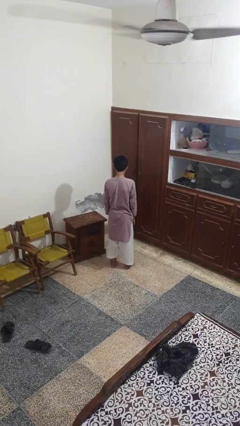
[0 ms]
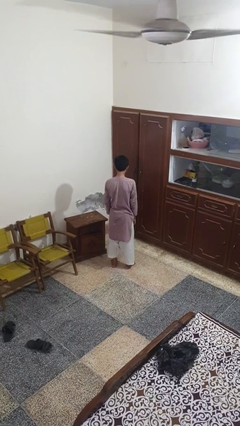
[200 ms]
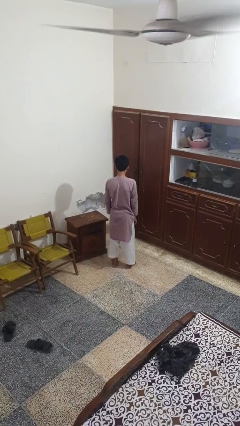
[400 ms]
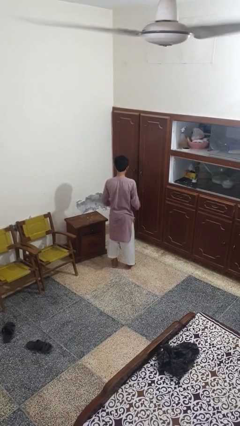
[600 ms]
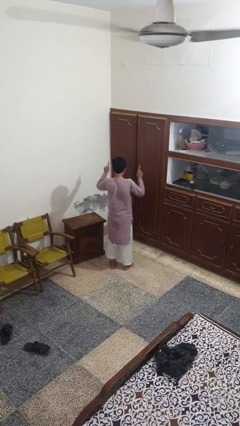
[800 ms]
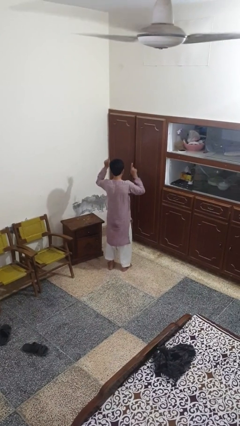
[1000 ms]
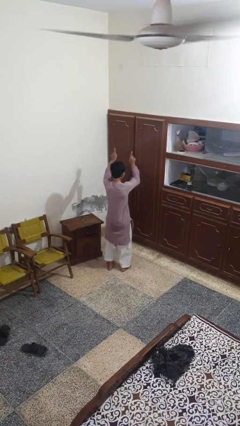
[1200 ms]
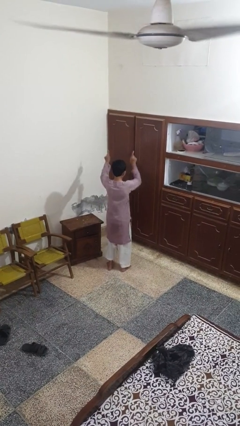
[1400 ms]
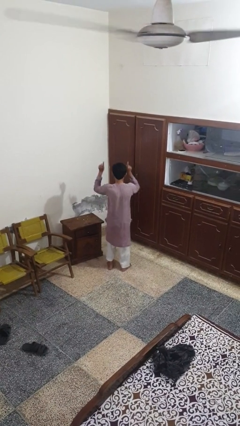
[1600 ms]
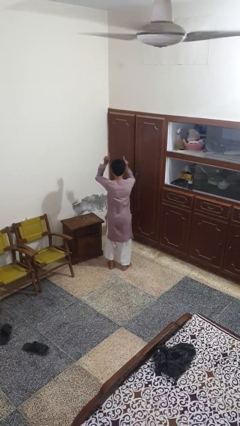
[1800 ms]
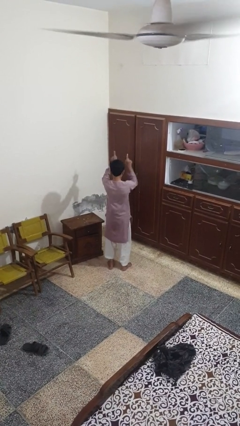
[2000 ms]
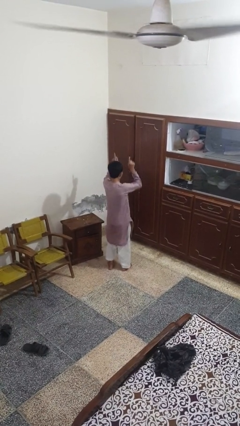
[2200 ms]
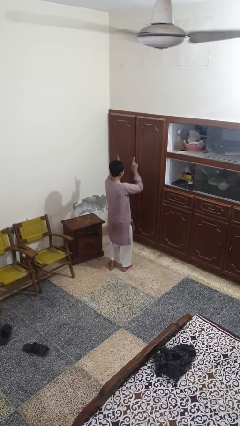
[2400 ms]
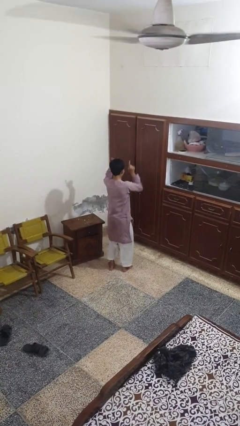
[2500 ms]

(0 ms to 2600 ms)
person dances in place

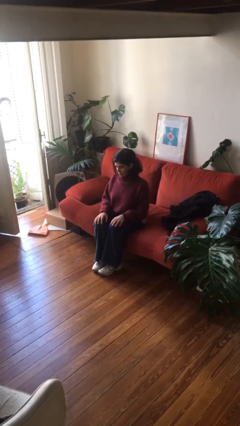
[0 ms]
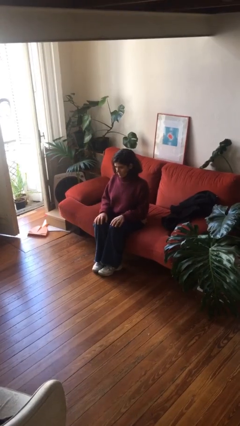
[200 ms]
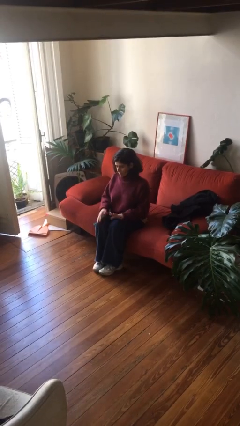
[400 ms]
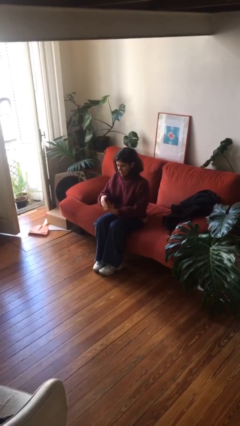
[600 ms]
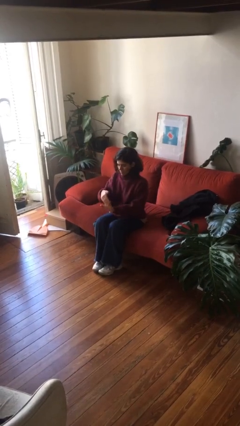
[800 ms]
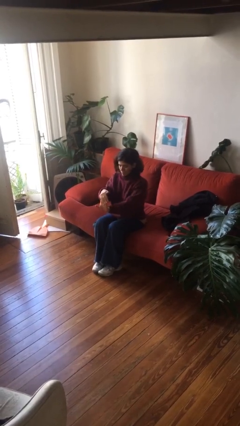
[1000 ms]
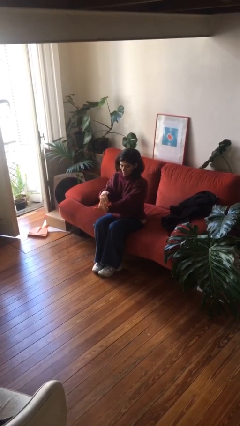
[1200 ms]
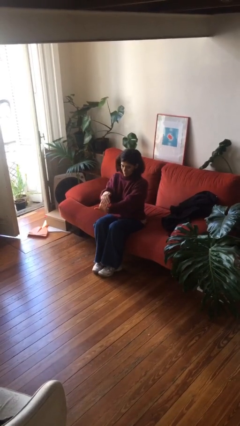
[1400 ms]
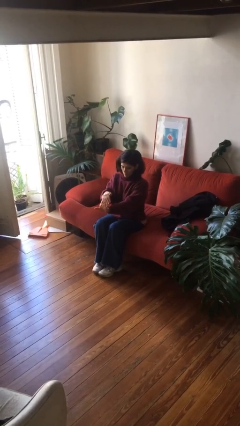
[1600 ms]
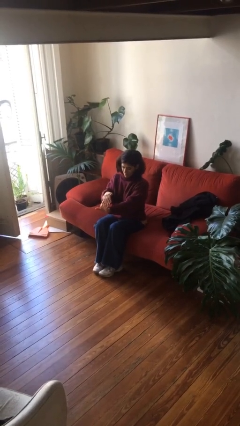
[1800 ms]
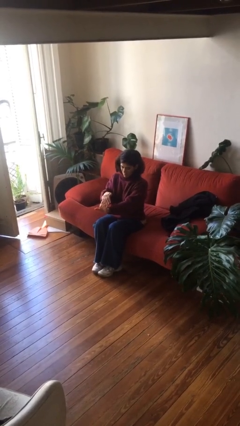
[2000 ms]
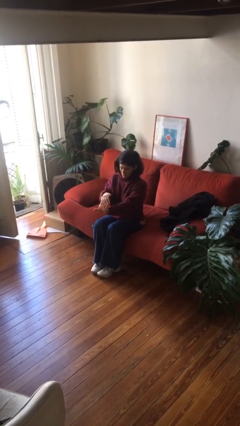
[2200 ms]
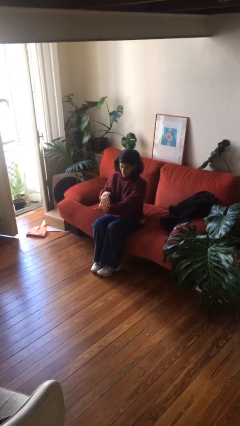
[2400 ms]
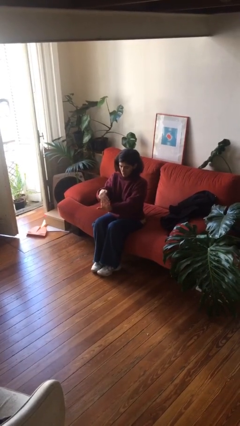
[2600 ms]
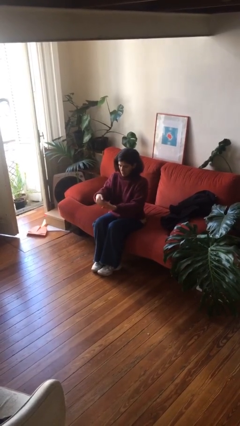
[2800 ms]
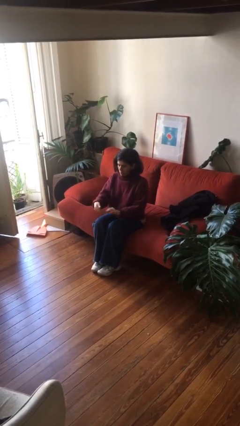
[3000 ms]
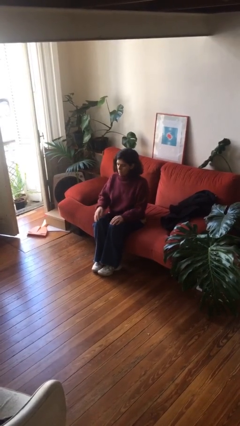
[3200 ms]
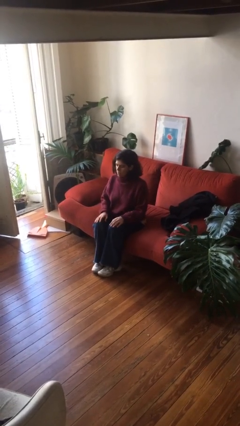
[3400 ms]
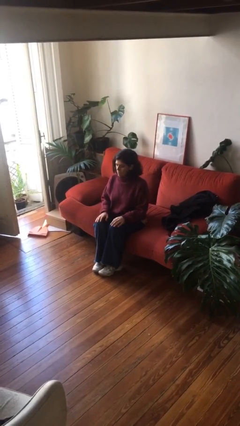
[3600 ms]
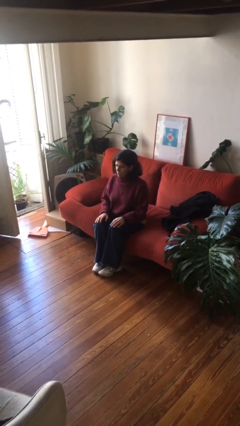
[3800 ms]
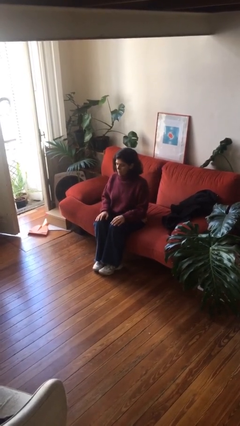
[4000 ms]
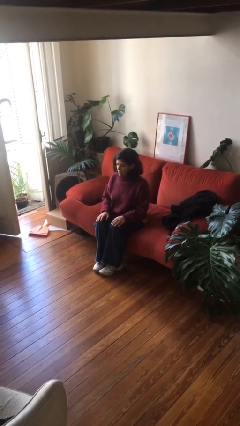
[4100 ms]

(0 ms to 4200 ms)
person cracks knuckles

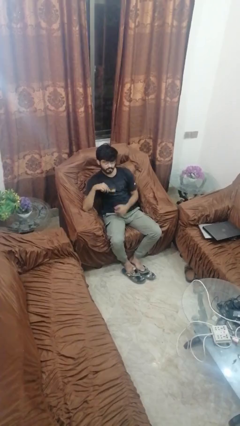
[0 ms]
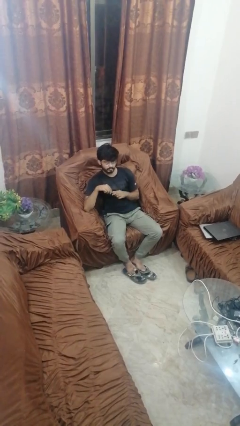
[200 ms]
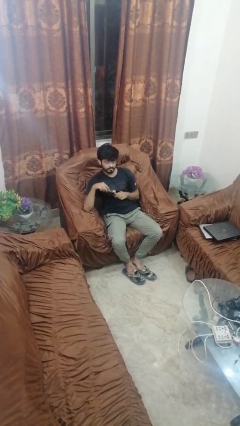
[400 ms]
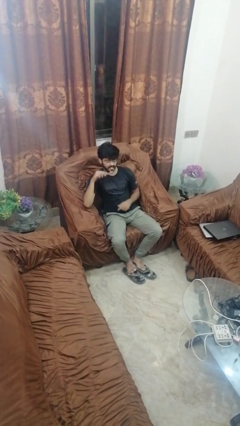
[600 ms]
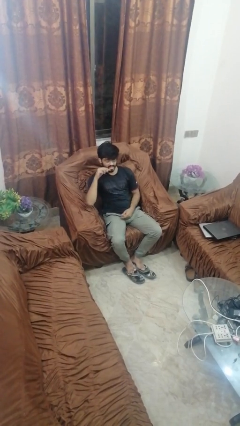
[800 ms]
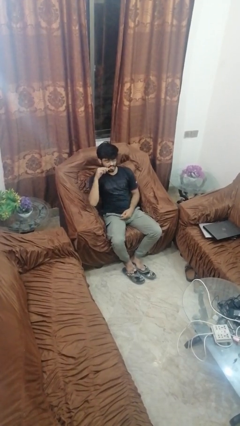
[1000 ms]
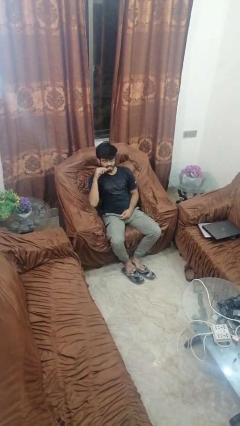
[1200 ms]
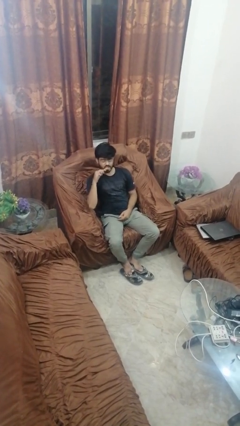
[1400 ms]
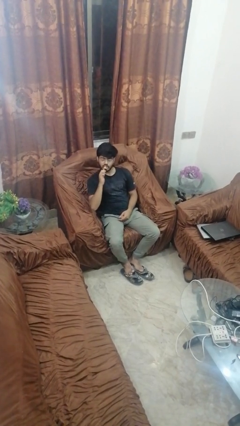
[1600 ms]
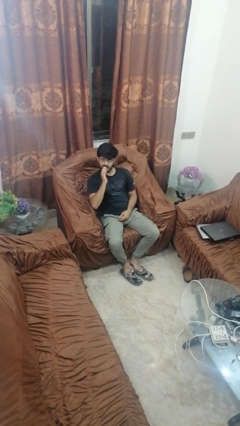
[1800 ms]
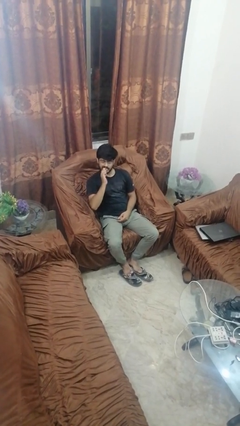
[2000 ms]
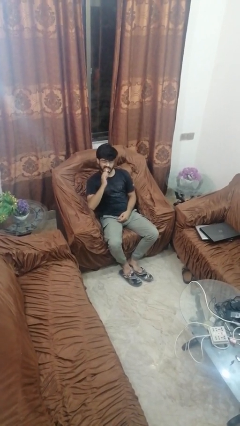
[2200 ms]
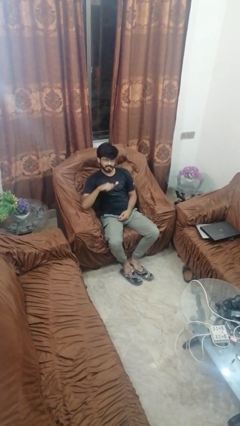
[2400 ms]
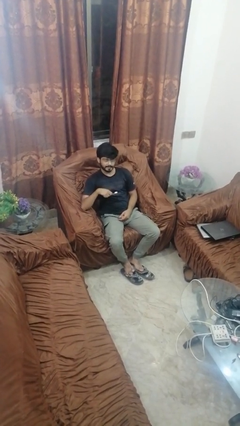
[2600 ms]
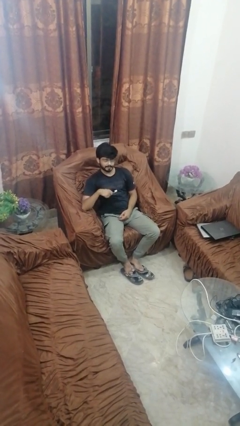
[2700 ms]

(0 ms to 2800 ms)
person brushes teeth

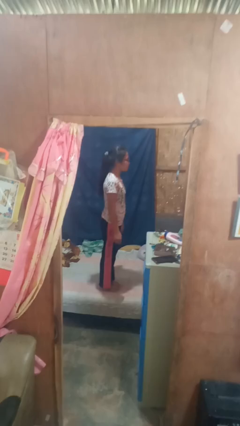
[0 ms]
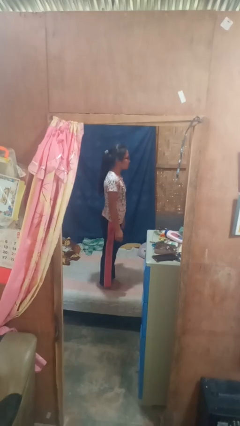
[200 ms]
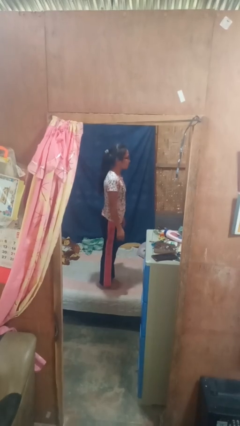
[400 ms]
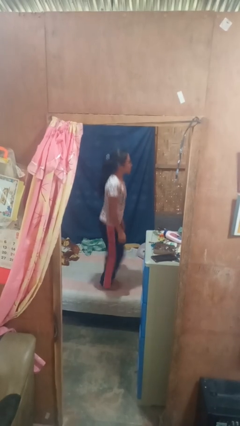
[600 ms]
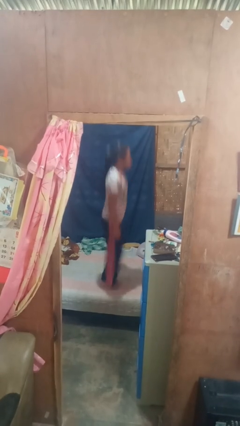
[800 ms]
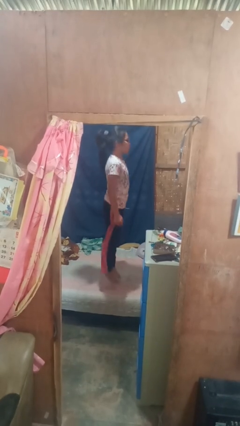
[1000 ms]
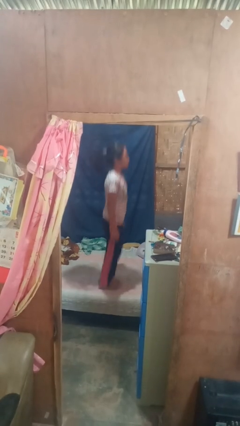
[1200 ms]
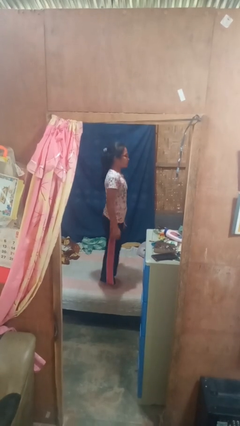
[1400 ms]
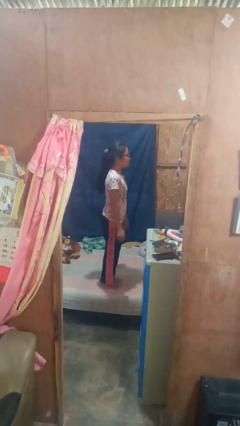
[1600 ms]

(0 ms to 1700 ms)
person jumps on bed

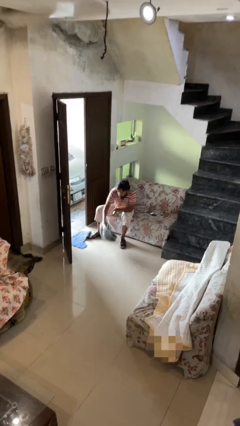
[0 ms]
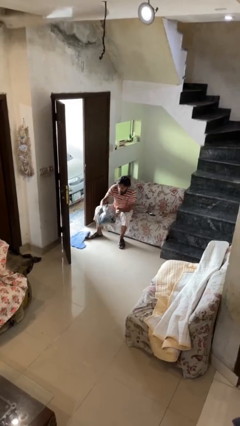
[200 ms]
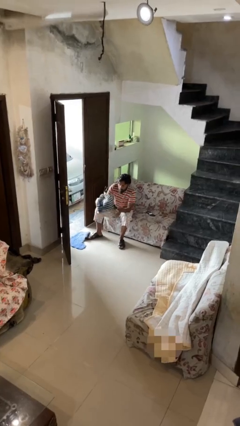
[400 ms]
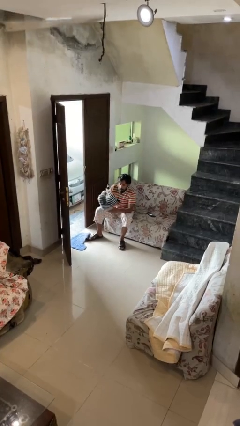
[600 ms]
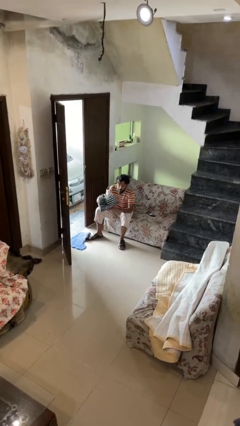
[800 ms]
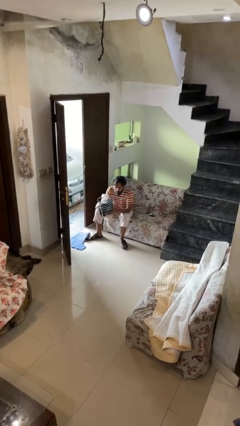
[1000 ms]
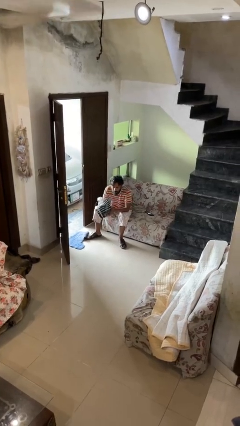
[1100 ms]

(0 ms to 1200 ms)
person picks up object from floor

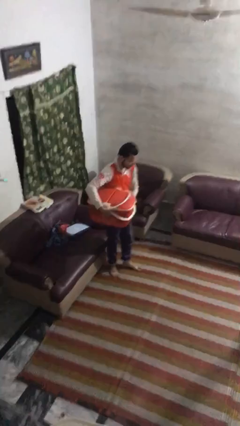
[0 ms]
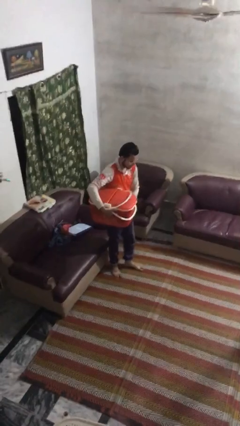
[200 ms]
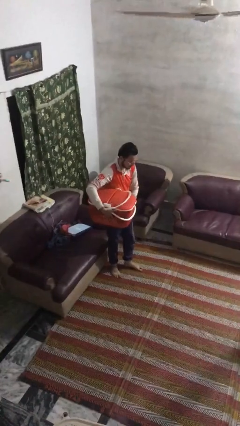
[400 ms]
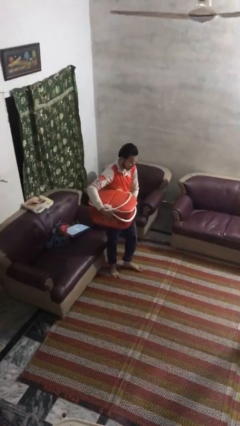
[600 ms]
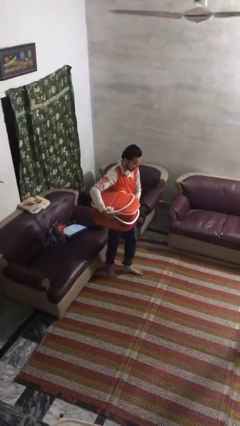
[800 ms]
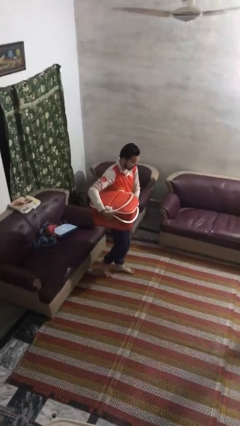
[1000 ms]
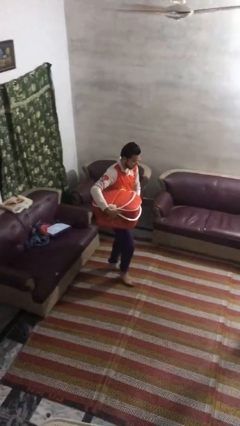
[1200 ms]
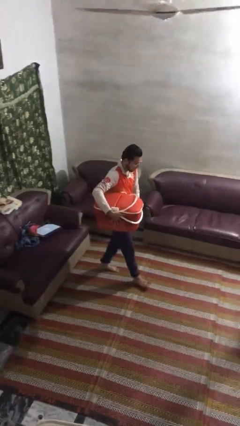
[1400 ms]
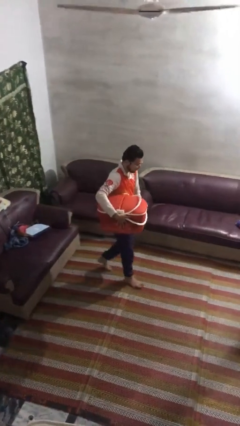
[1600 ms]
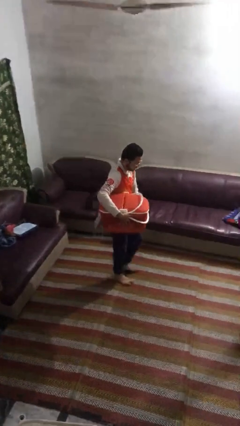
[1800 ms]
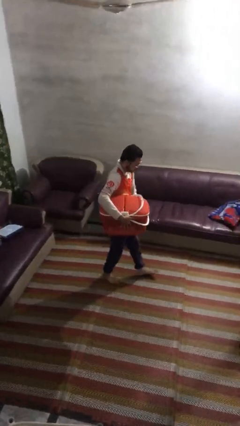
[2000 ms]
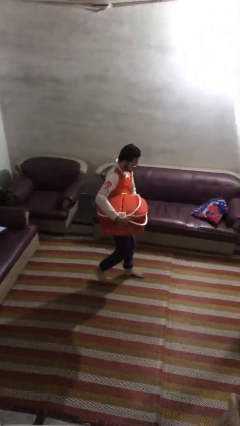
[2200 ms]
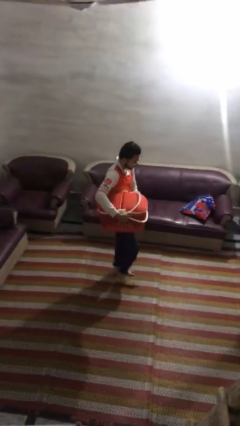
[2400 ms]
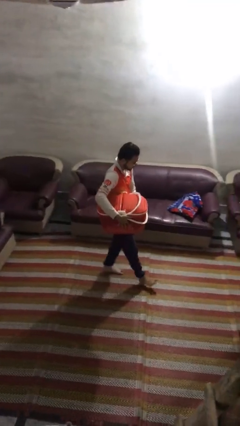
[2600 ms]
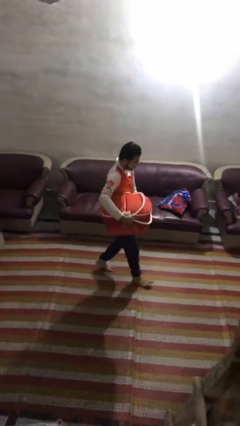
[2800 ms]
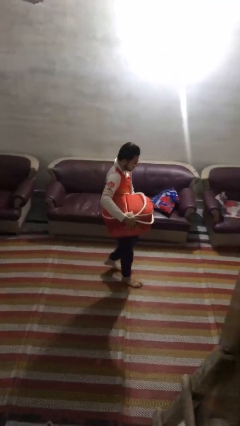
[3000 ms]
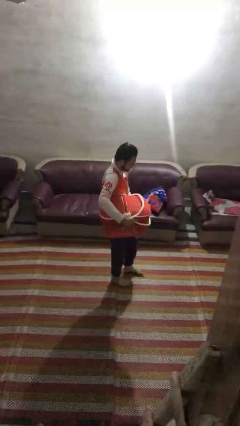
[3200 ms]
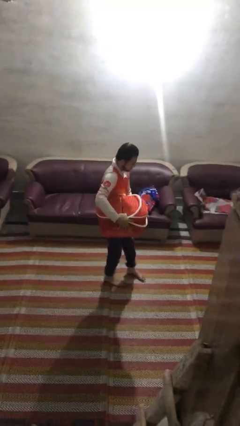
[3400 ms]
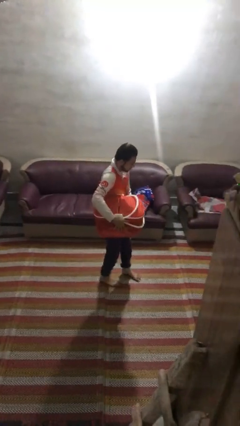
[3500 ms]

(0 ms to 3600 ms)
person carries laundry basket

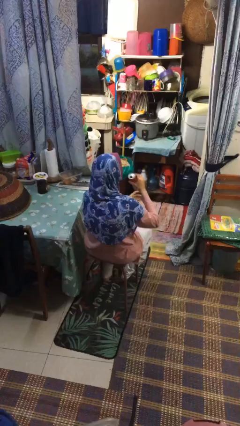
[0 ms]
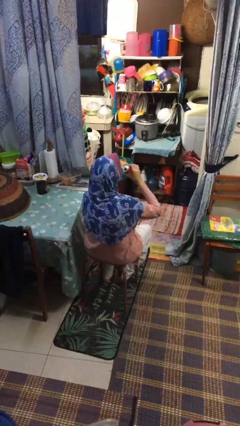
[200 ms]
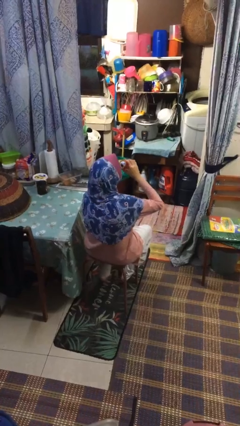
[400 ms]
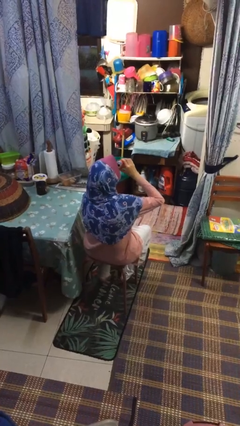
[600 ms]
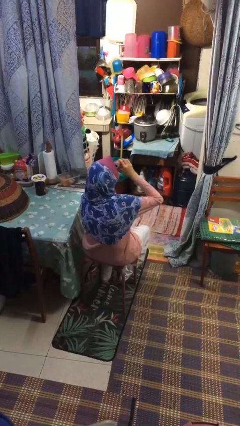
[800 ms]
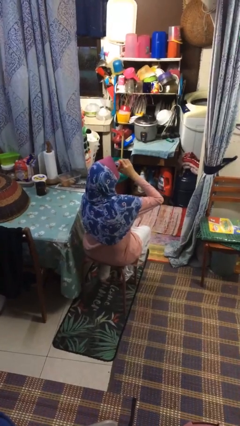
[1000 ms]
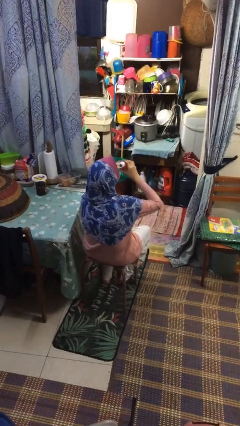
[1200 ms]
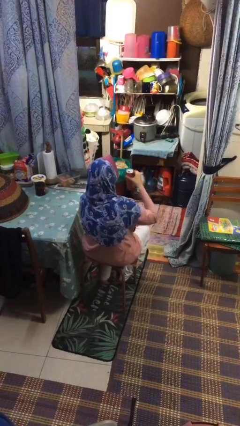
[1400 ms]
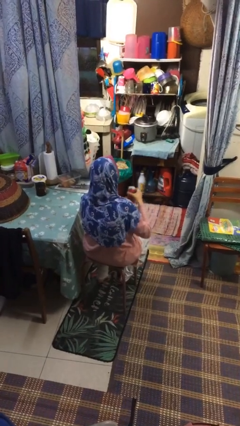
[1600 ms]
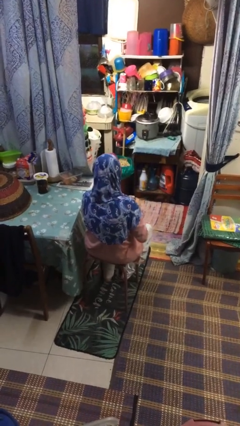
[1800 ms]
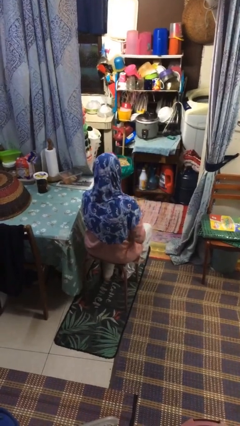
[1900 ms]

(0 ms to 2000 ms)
person drinks from beverage can
